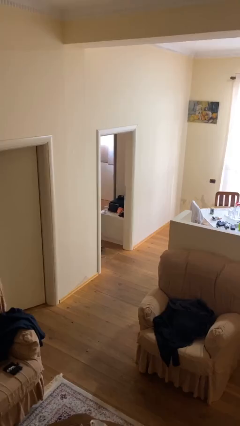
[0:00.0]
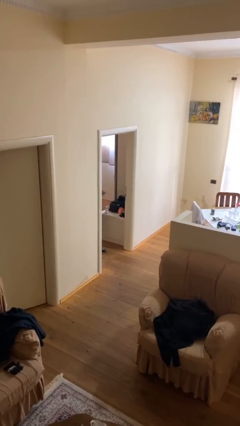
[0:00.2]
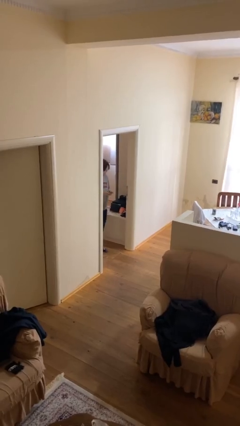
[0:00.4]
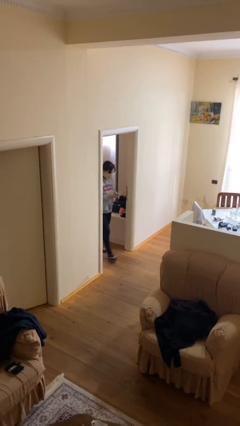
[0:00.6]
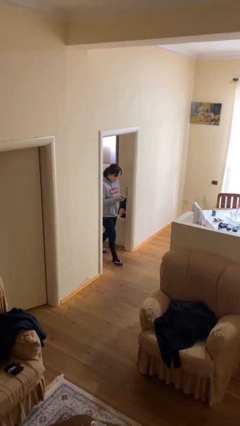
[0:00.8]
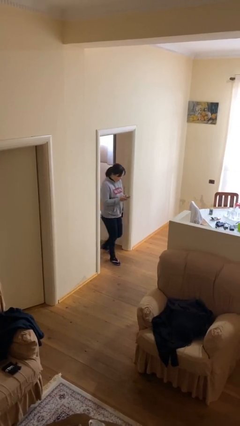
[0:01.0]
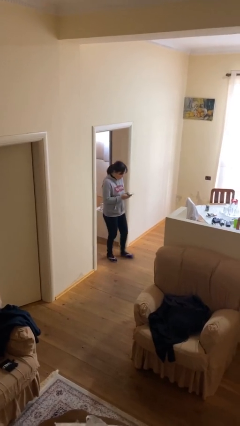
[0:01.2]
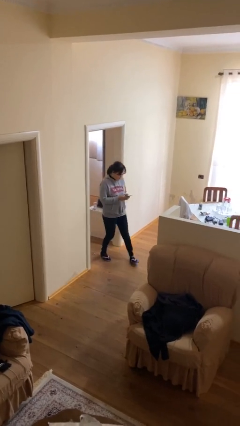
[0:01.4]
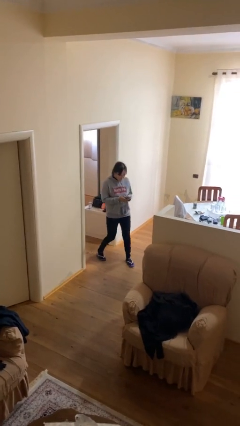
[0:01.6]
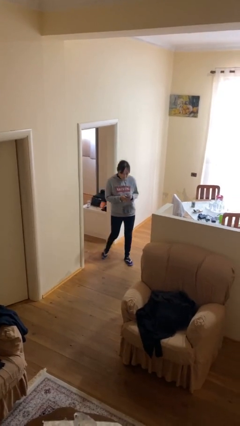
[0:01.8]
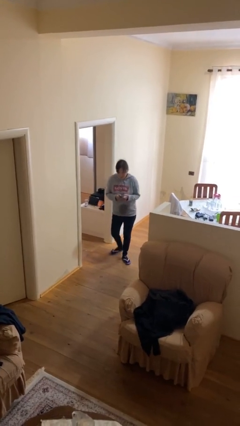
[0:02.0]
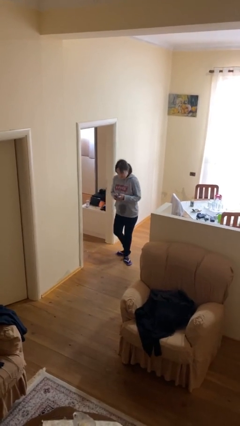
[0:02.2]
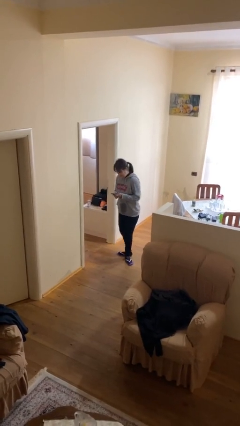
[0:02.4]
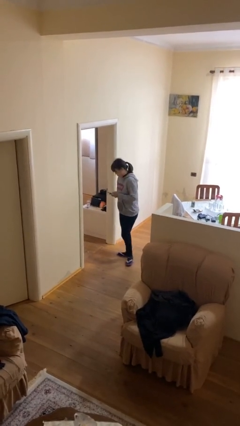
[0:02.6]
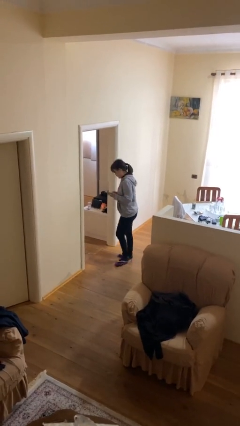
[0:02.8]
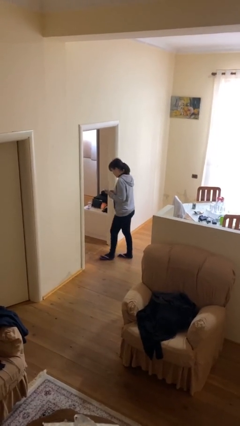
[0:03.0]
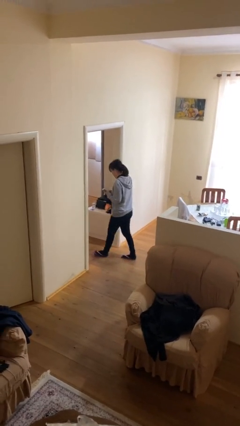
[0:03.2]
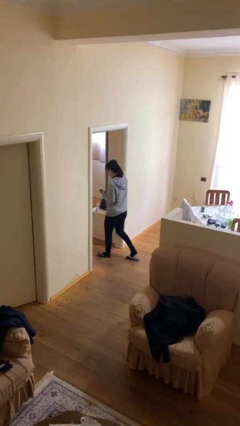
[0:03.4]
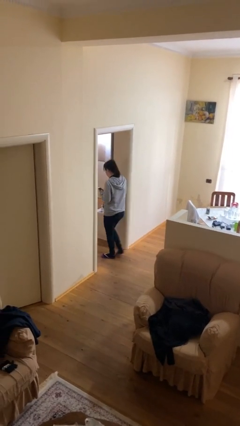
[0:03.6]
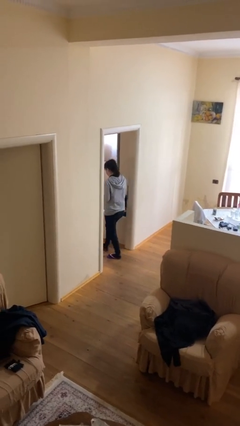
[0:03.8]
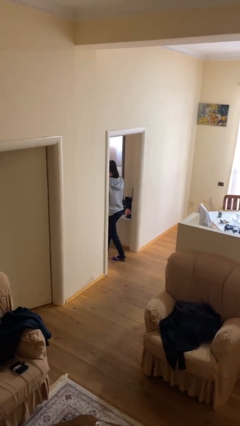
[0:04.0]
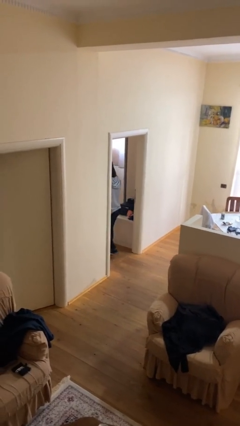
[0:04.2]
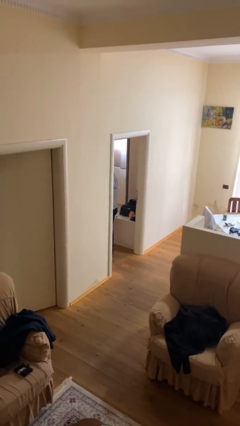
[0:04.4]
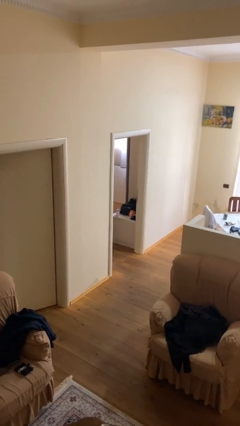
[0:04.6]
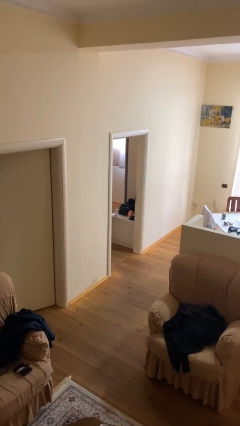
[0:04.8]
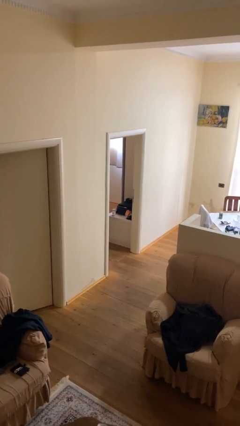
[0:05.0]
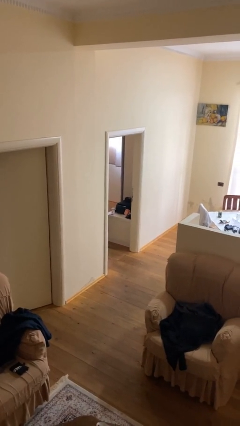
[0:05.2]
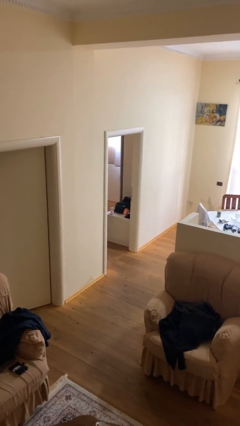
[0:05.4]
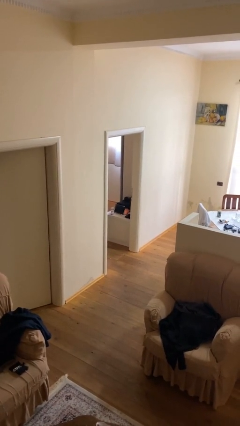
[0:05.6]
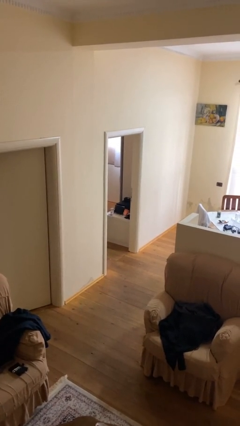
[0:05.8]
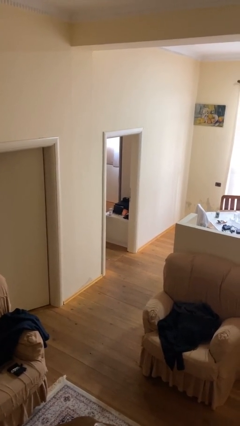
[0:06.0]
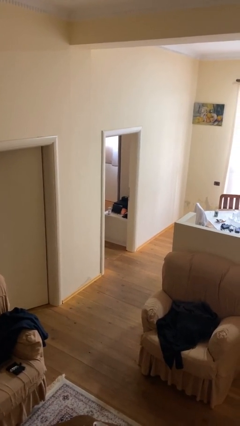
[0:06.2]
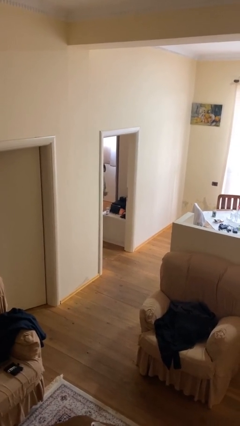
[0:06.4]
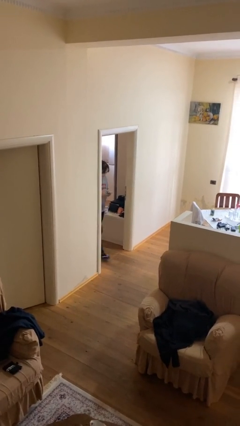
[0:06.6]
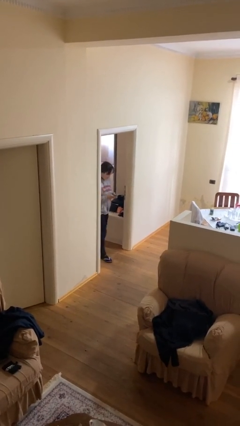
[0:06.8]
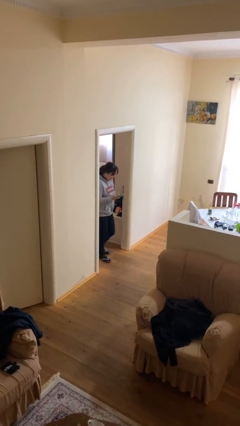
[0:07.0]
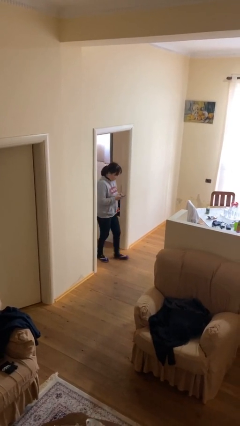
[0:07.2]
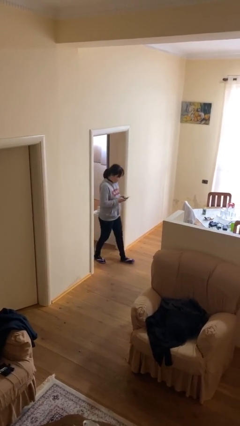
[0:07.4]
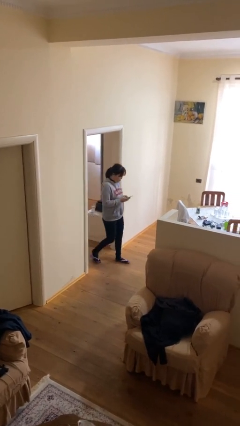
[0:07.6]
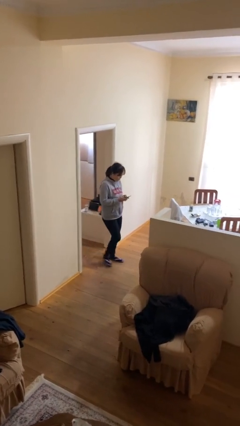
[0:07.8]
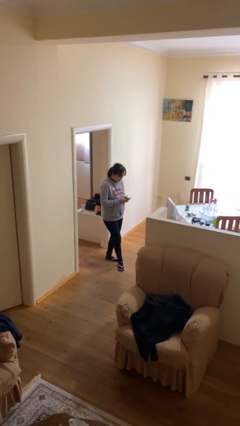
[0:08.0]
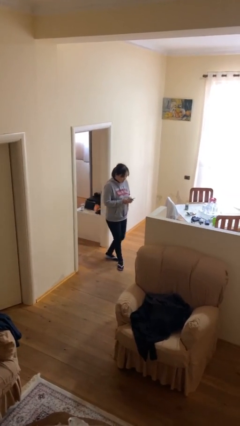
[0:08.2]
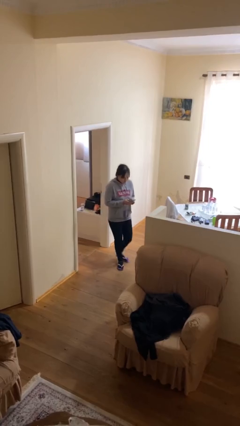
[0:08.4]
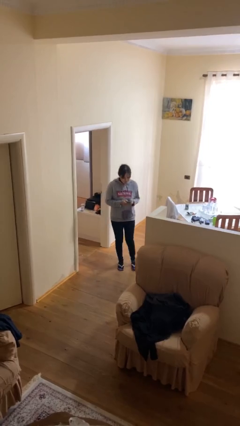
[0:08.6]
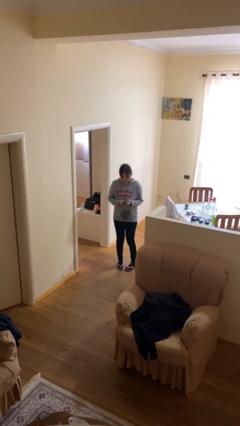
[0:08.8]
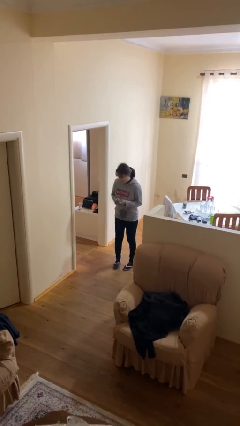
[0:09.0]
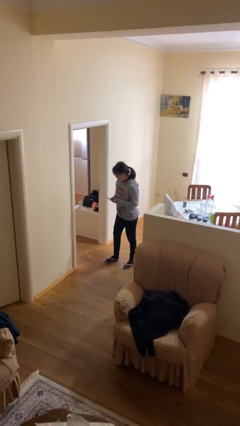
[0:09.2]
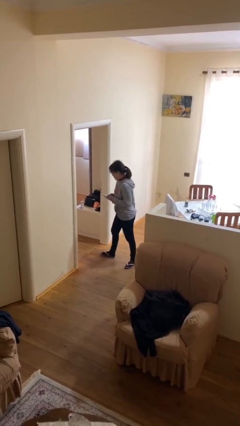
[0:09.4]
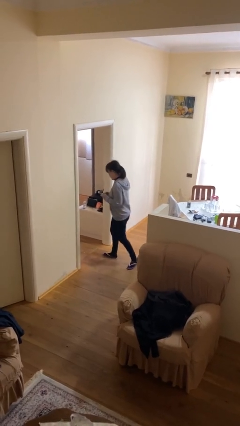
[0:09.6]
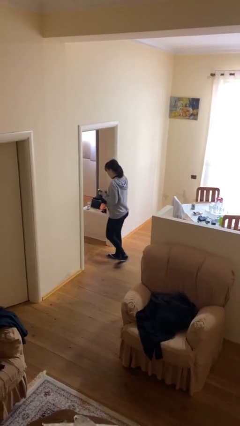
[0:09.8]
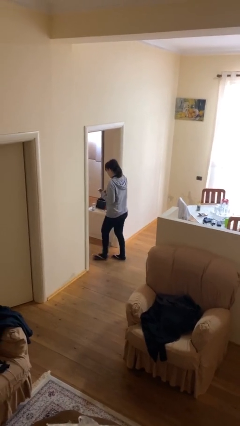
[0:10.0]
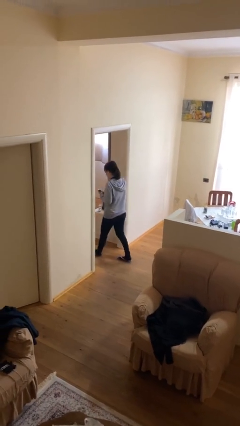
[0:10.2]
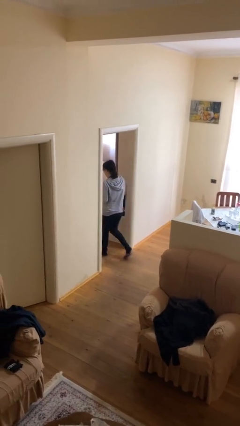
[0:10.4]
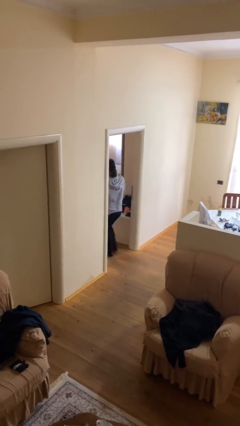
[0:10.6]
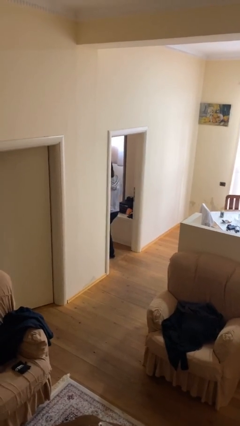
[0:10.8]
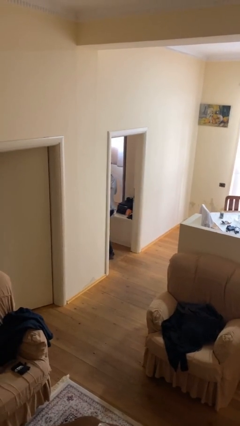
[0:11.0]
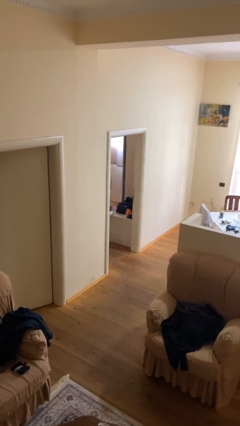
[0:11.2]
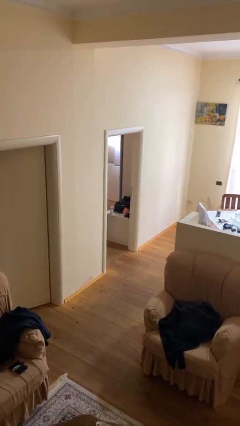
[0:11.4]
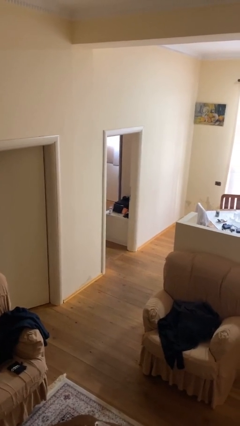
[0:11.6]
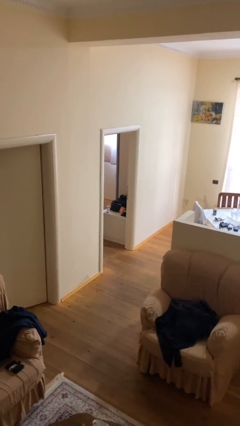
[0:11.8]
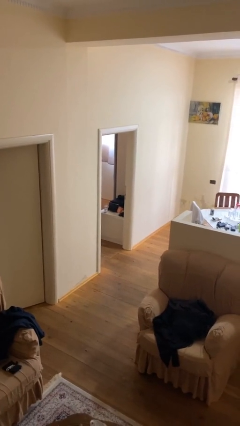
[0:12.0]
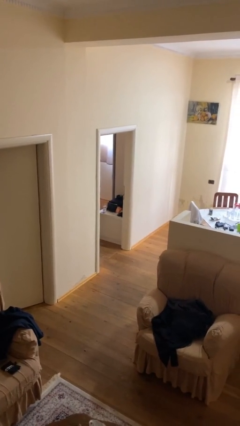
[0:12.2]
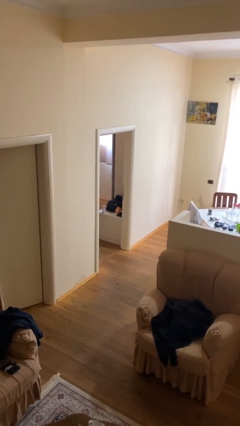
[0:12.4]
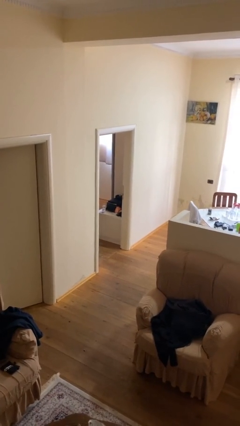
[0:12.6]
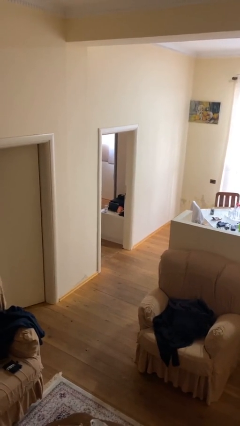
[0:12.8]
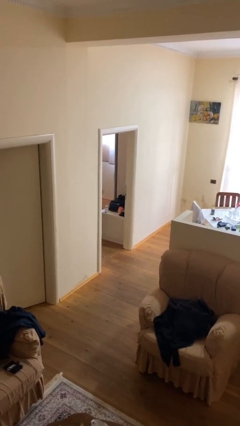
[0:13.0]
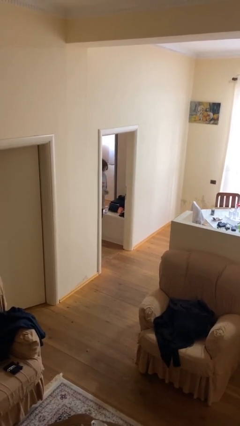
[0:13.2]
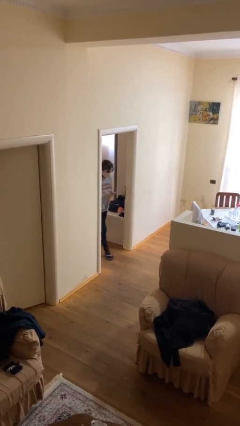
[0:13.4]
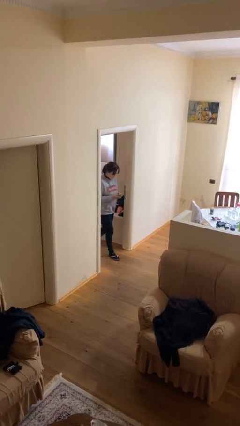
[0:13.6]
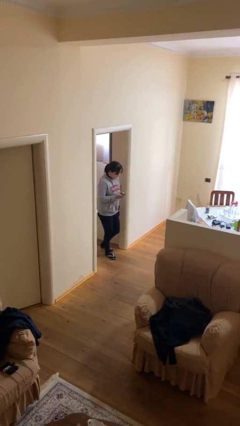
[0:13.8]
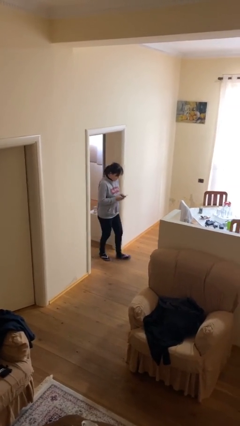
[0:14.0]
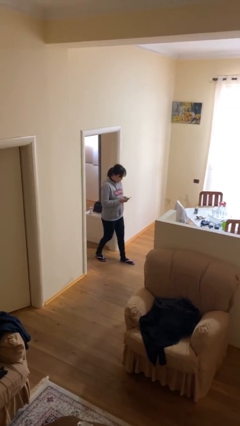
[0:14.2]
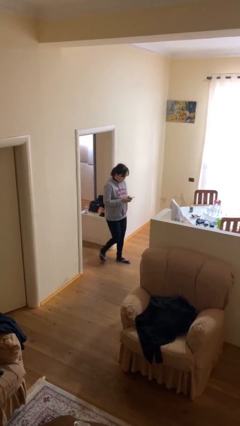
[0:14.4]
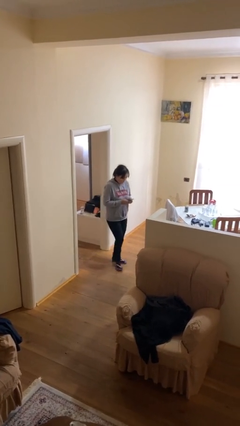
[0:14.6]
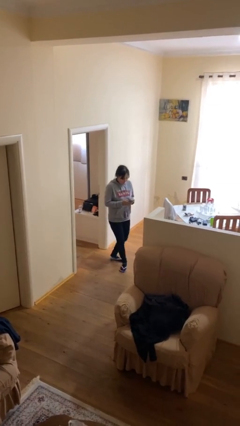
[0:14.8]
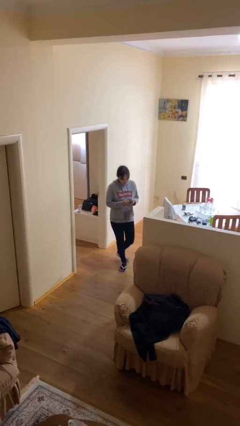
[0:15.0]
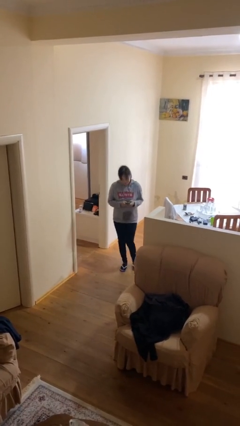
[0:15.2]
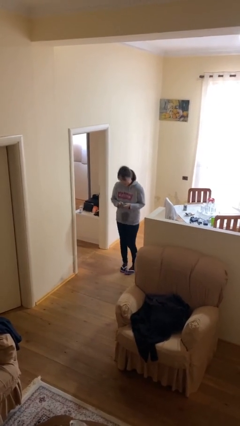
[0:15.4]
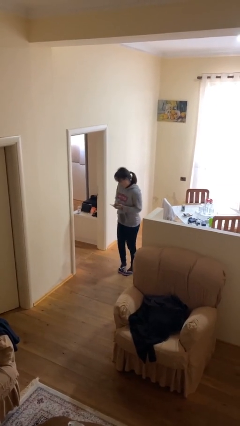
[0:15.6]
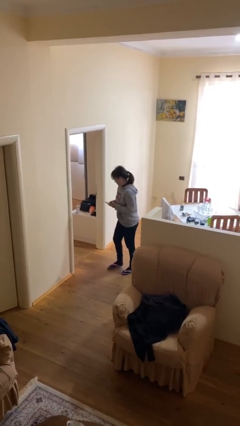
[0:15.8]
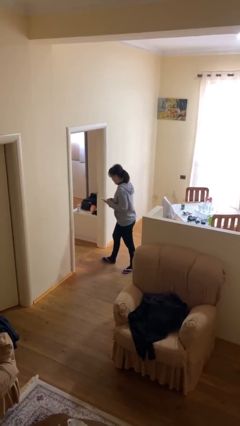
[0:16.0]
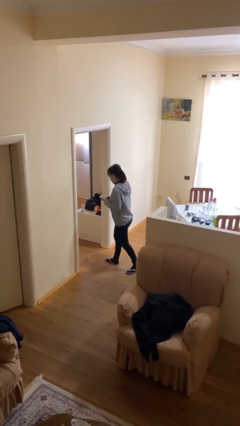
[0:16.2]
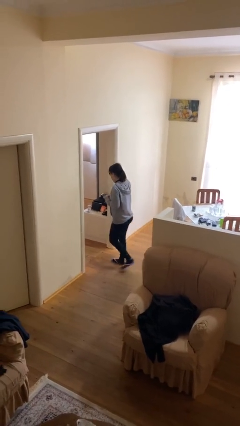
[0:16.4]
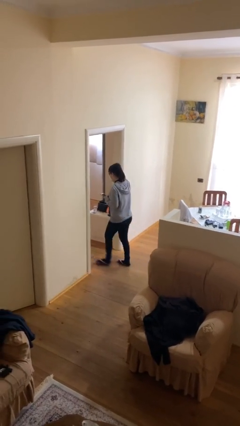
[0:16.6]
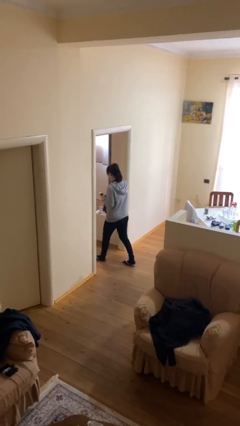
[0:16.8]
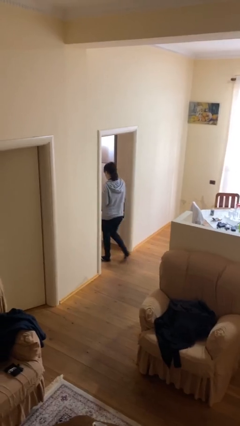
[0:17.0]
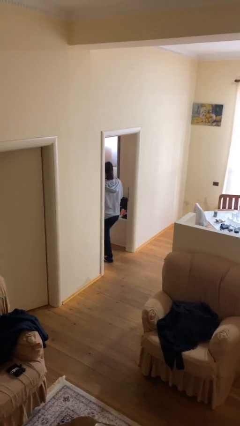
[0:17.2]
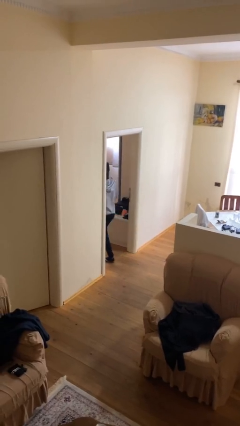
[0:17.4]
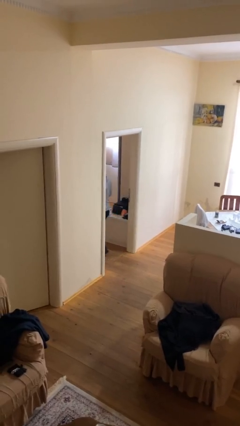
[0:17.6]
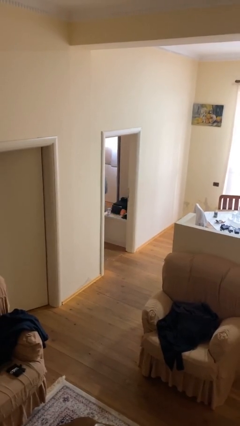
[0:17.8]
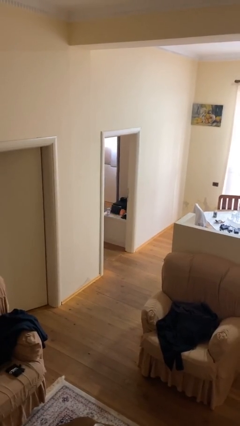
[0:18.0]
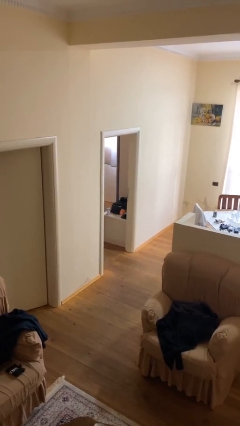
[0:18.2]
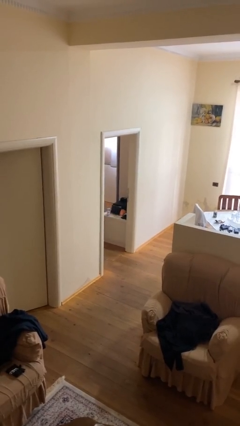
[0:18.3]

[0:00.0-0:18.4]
person texts on phone
